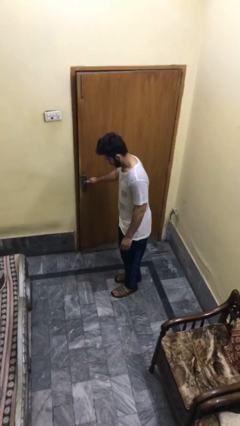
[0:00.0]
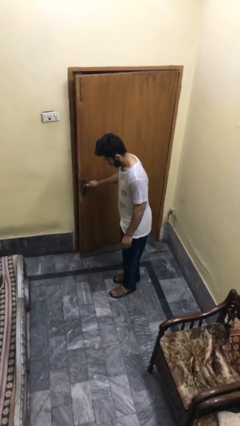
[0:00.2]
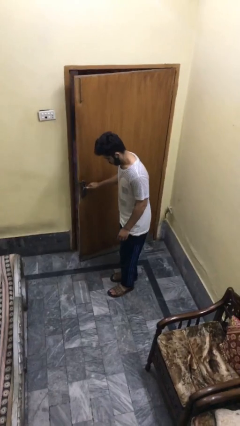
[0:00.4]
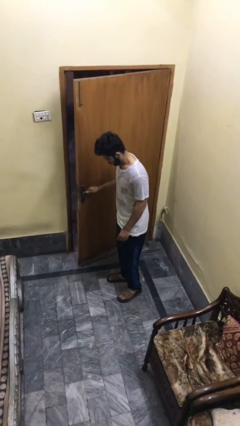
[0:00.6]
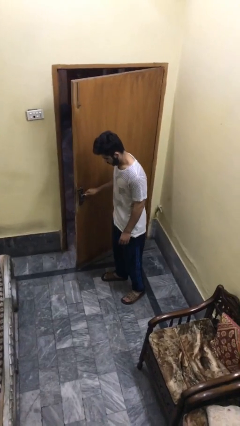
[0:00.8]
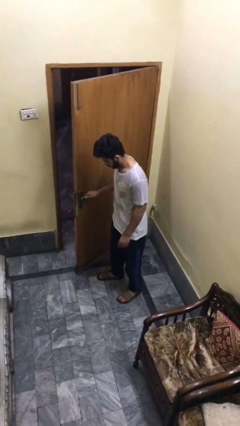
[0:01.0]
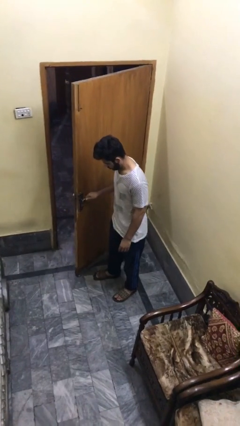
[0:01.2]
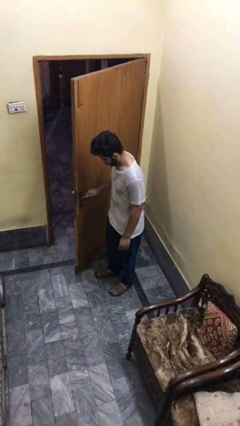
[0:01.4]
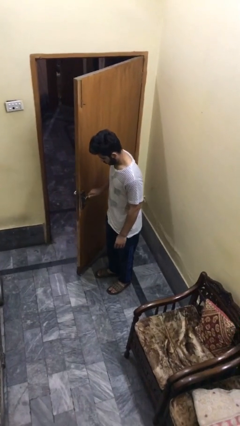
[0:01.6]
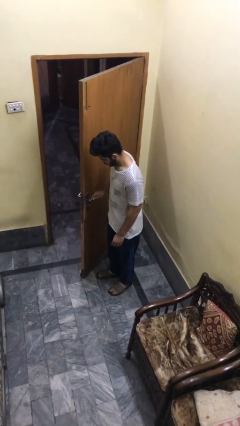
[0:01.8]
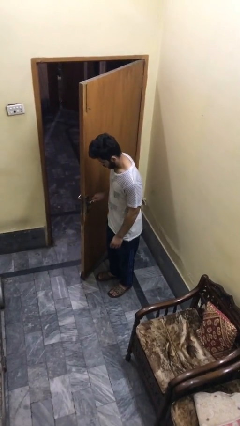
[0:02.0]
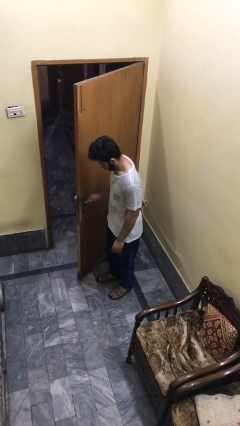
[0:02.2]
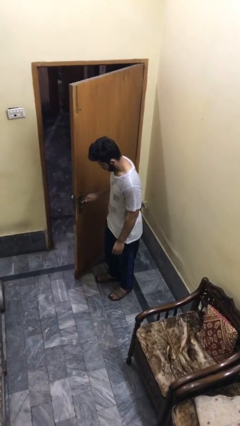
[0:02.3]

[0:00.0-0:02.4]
person opens facility door

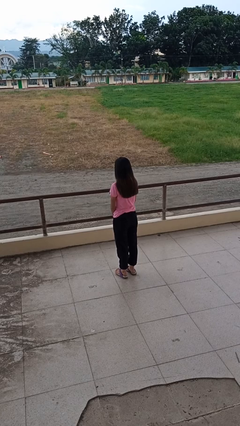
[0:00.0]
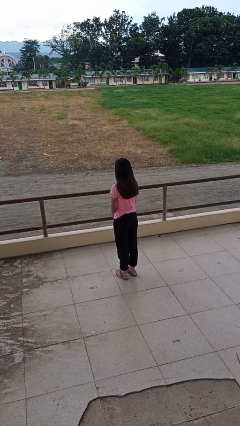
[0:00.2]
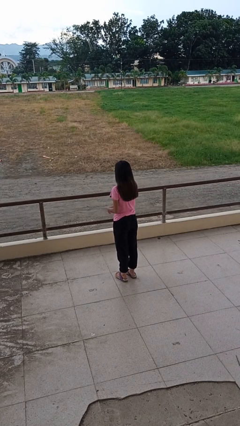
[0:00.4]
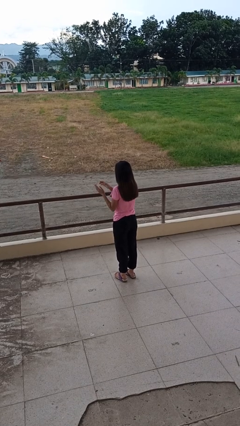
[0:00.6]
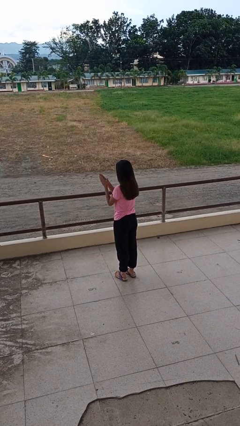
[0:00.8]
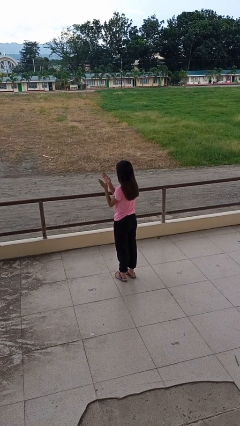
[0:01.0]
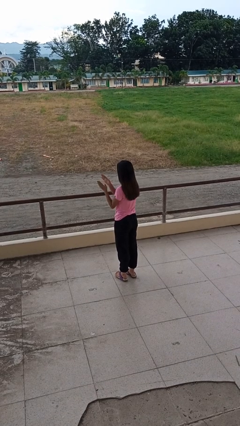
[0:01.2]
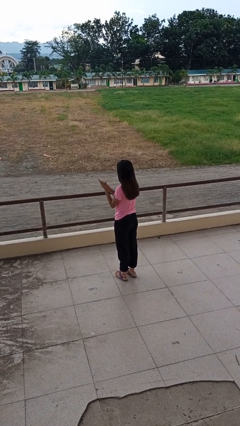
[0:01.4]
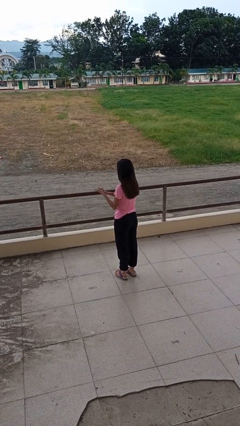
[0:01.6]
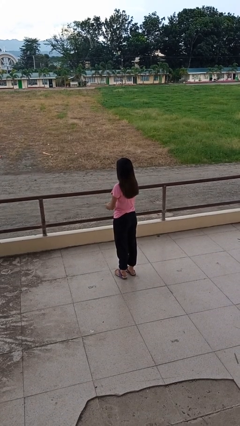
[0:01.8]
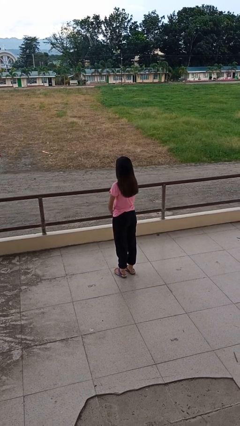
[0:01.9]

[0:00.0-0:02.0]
person claps hands

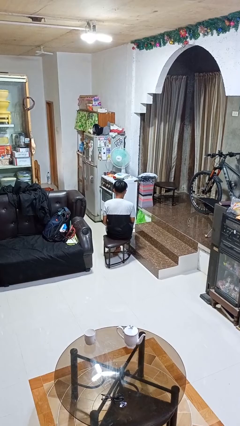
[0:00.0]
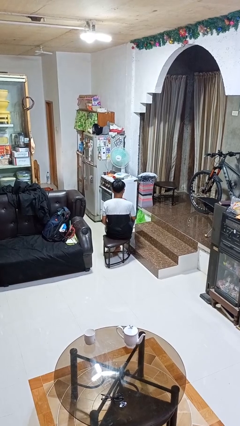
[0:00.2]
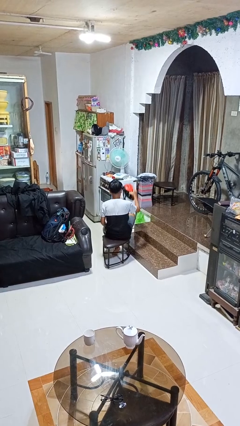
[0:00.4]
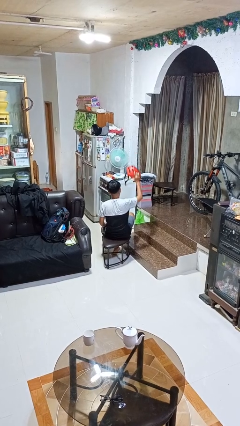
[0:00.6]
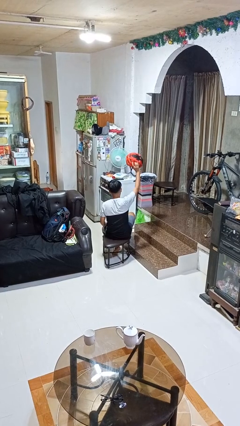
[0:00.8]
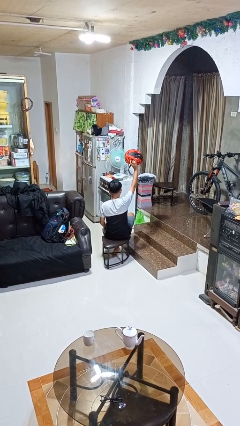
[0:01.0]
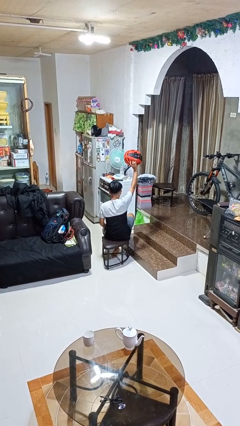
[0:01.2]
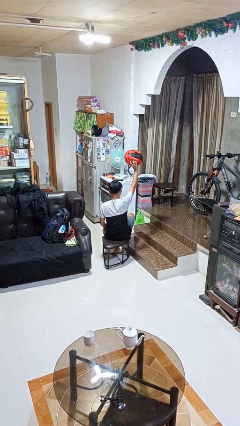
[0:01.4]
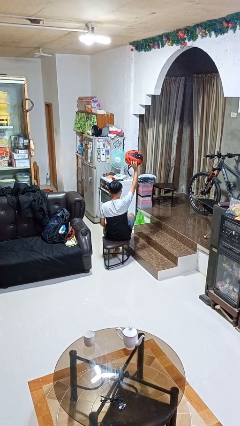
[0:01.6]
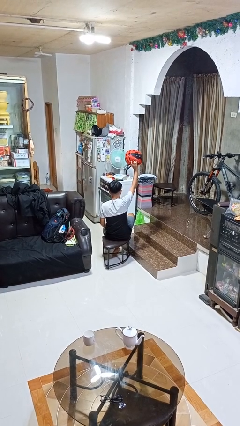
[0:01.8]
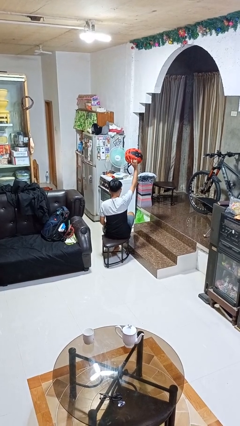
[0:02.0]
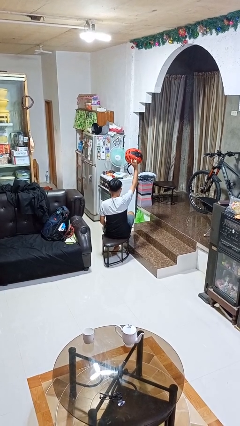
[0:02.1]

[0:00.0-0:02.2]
person holds object above head

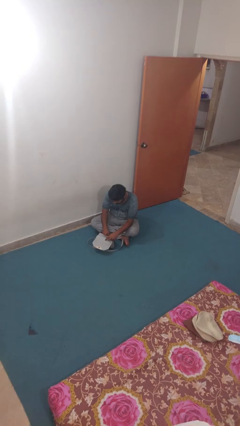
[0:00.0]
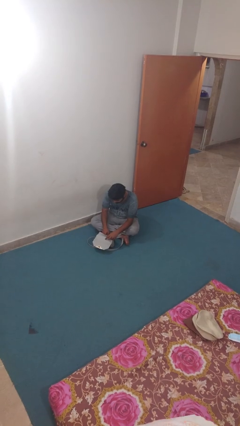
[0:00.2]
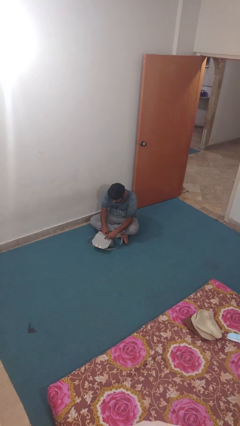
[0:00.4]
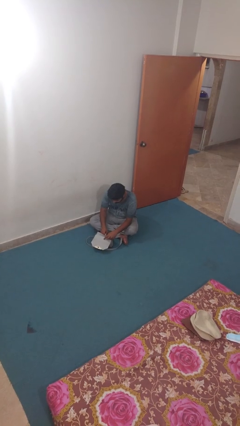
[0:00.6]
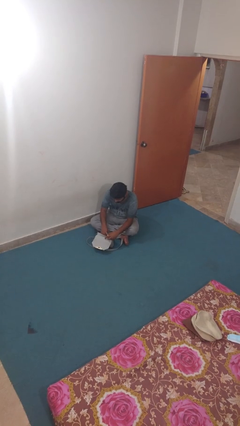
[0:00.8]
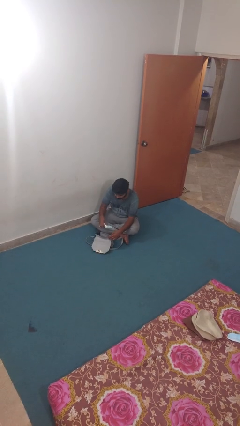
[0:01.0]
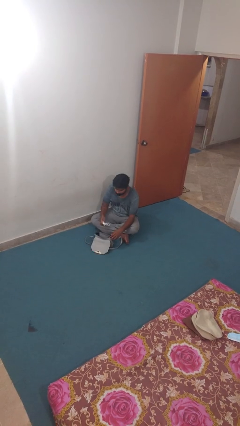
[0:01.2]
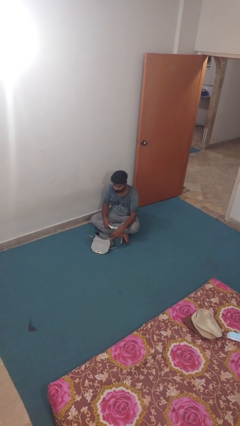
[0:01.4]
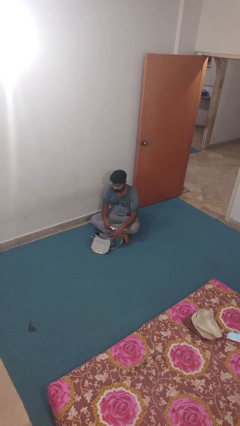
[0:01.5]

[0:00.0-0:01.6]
person takes object from purse

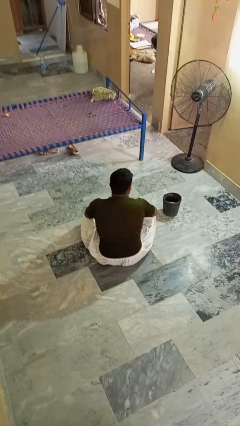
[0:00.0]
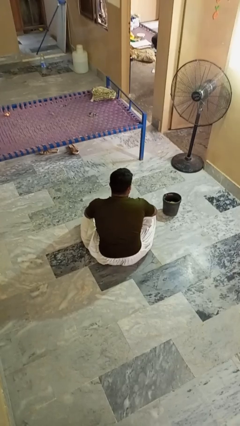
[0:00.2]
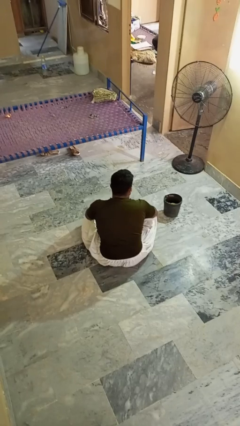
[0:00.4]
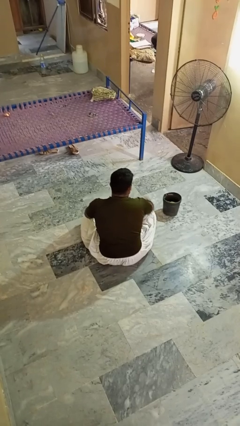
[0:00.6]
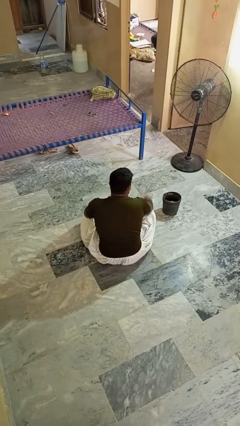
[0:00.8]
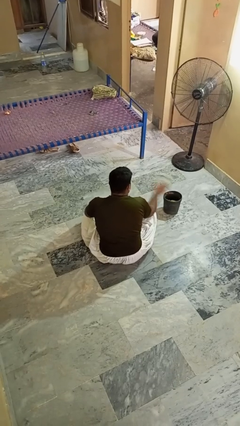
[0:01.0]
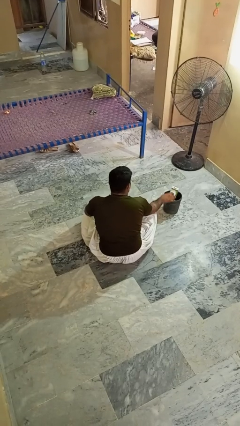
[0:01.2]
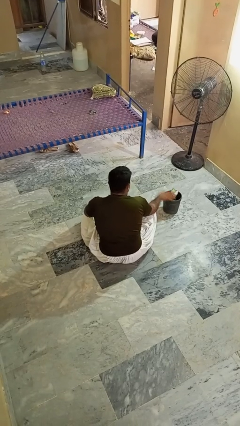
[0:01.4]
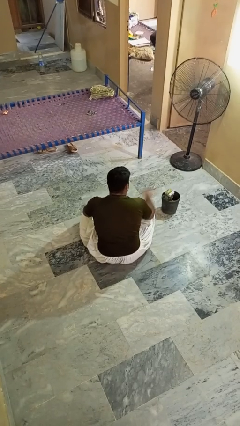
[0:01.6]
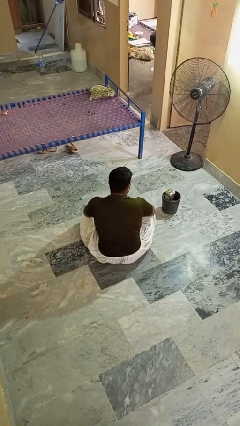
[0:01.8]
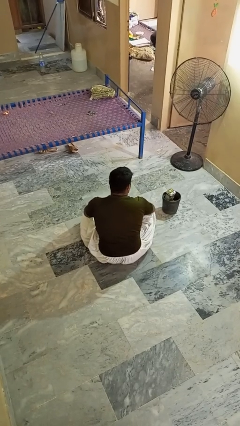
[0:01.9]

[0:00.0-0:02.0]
person puts object into basket

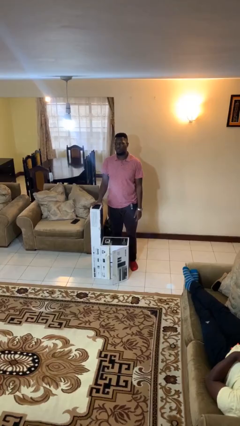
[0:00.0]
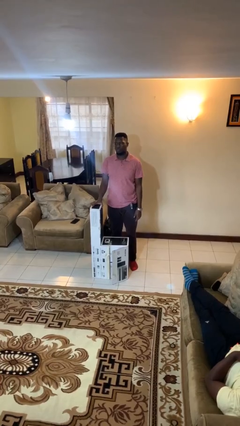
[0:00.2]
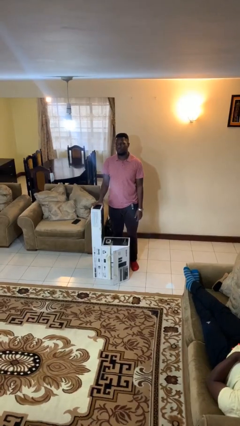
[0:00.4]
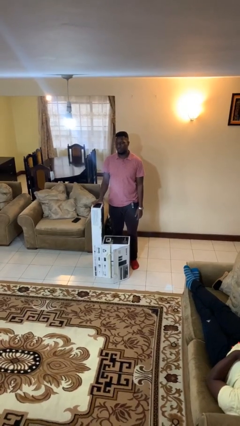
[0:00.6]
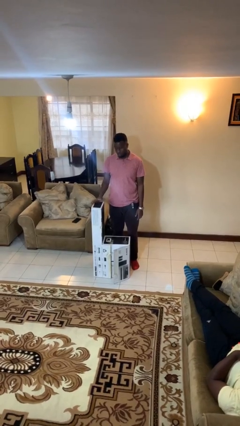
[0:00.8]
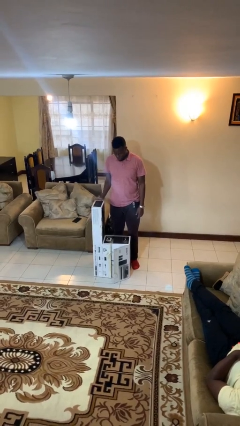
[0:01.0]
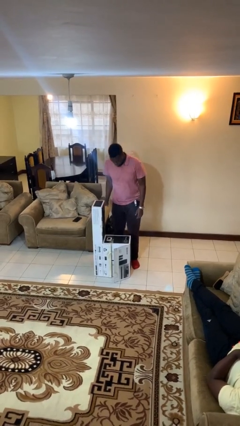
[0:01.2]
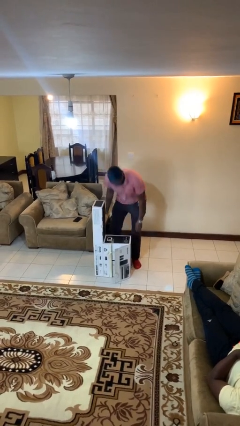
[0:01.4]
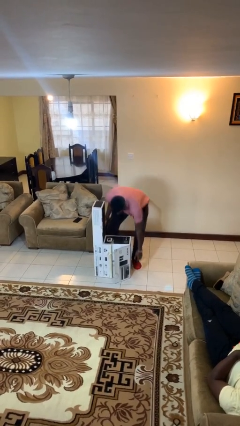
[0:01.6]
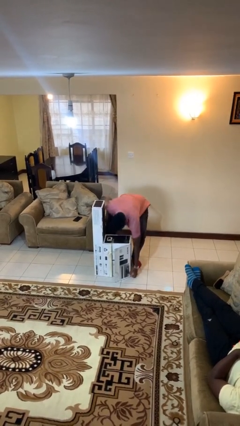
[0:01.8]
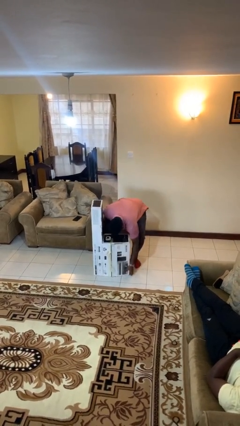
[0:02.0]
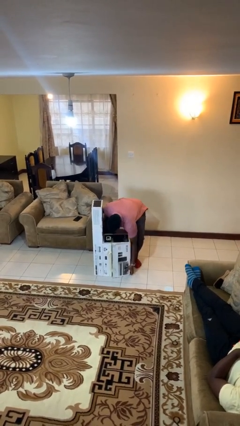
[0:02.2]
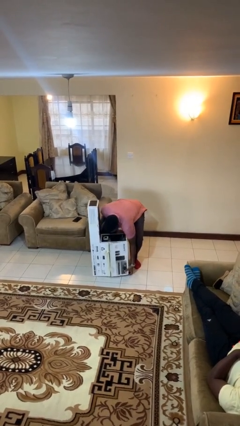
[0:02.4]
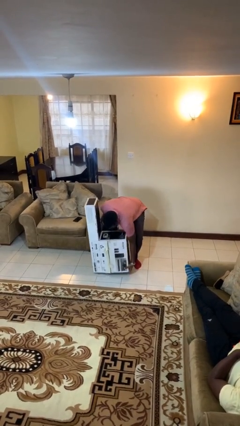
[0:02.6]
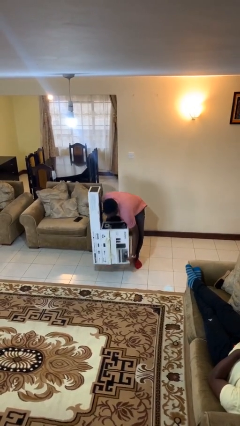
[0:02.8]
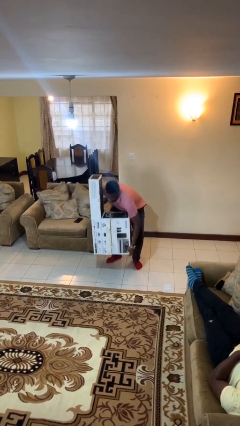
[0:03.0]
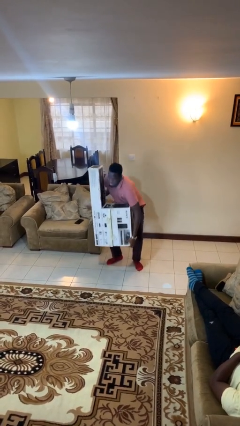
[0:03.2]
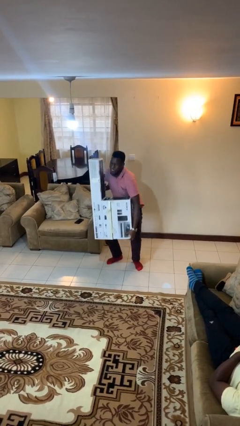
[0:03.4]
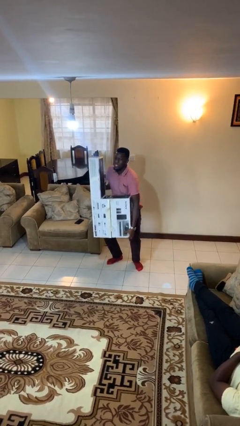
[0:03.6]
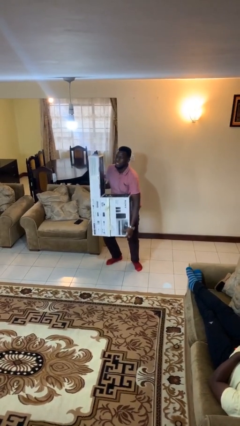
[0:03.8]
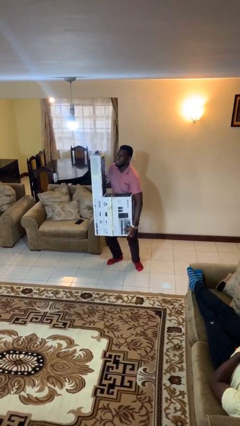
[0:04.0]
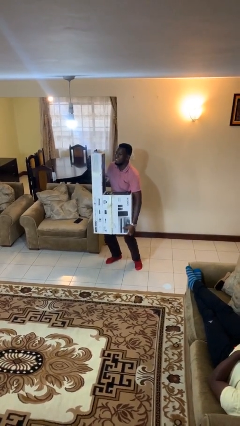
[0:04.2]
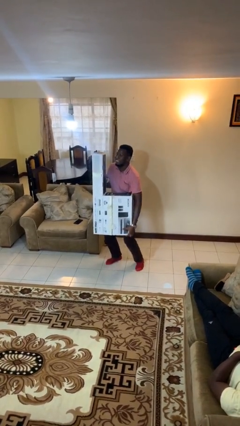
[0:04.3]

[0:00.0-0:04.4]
person picks up object from floor

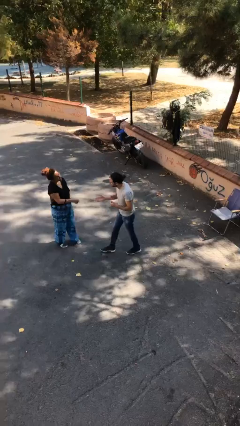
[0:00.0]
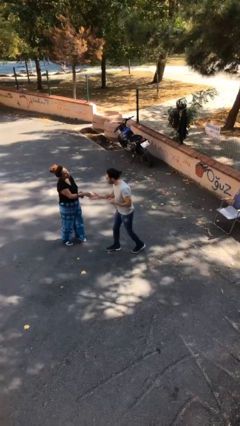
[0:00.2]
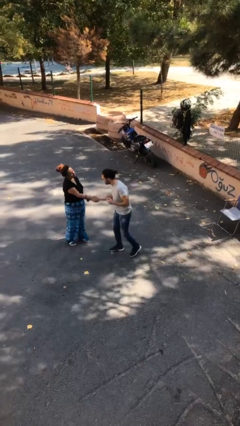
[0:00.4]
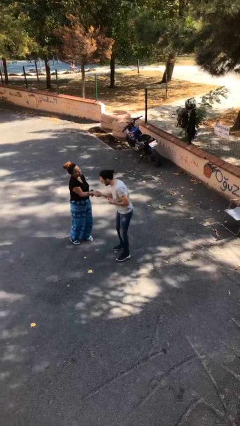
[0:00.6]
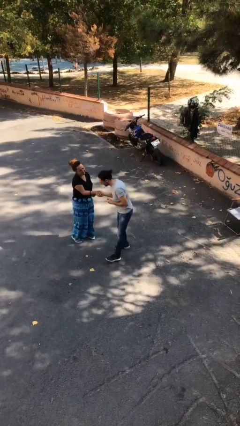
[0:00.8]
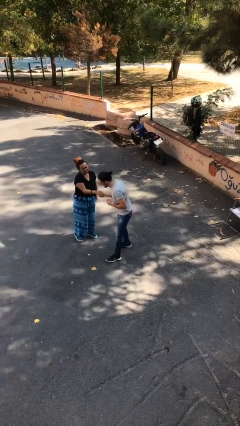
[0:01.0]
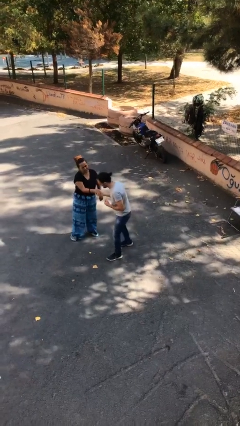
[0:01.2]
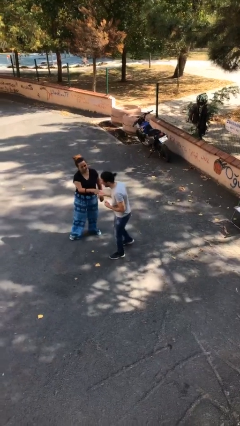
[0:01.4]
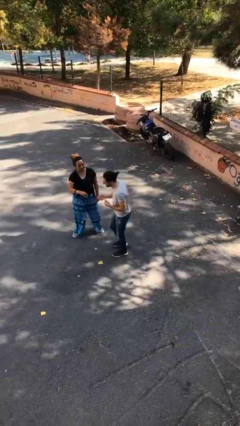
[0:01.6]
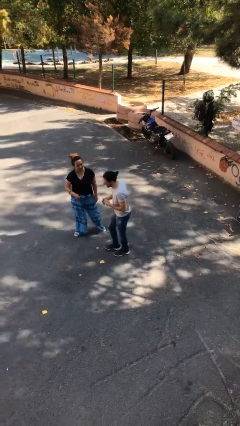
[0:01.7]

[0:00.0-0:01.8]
person shakes hand

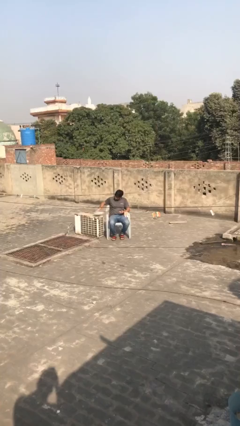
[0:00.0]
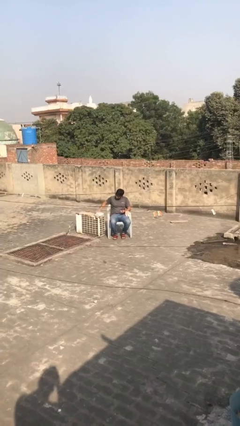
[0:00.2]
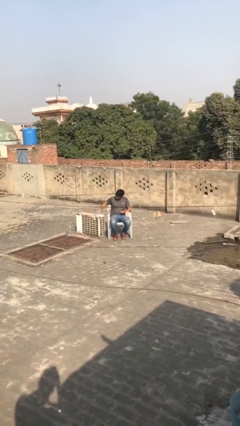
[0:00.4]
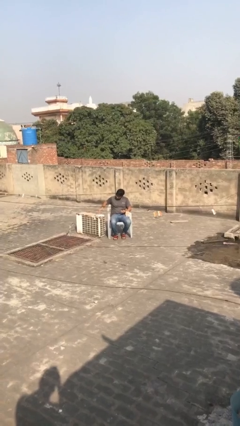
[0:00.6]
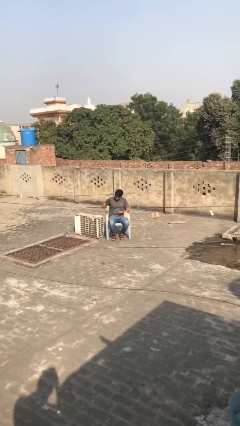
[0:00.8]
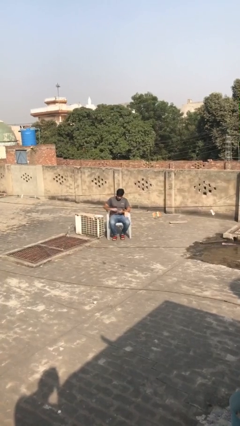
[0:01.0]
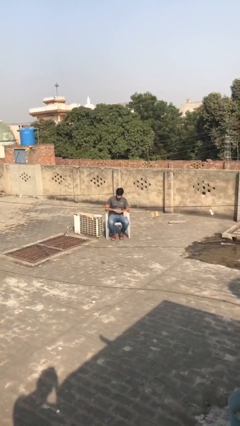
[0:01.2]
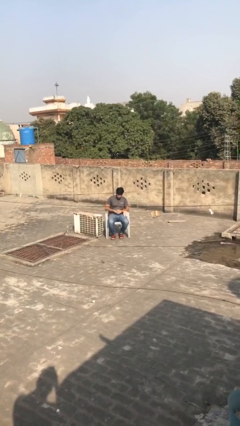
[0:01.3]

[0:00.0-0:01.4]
person puts down object on table
